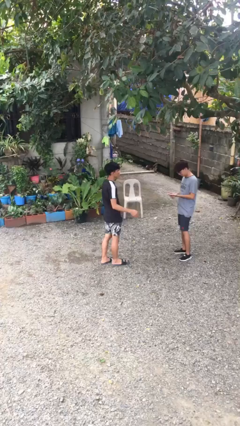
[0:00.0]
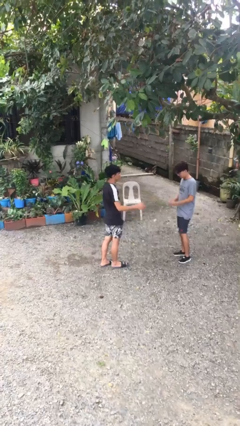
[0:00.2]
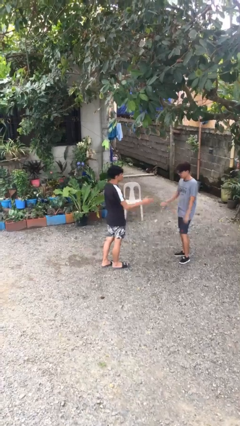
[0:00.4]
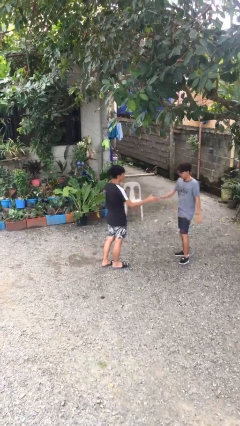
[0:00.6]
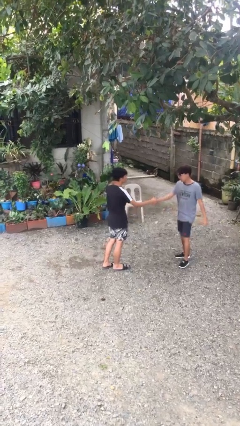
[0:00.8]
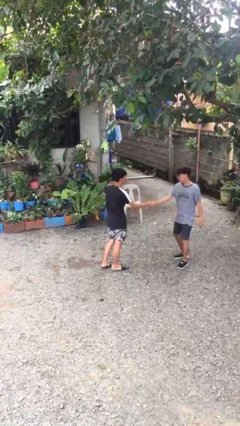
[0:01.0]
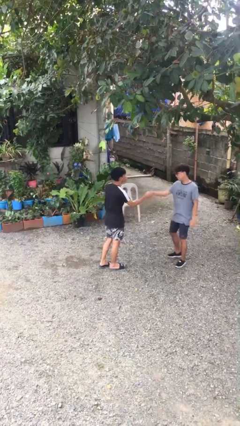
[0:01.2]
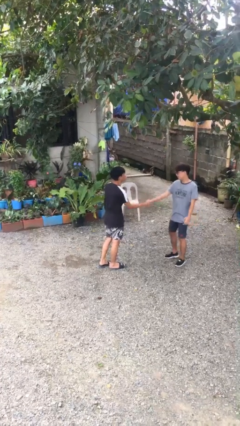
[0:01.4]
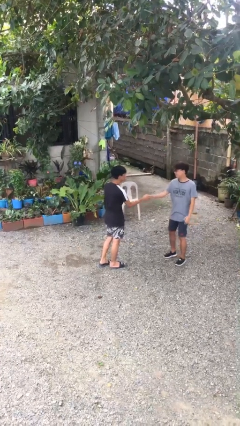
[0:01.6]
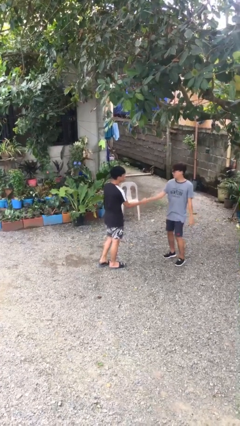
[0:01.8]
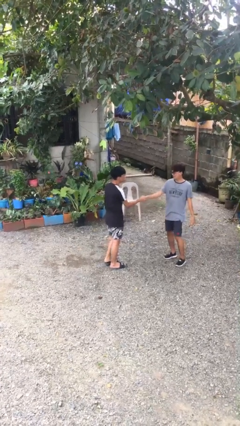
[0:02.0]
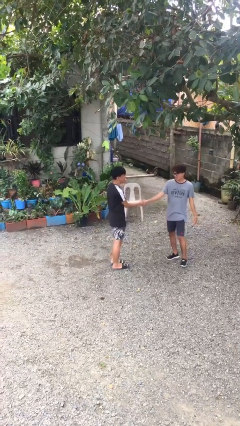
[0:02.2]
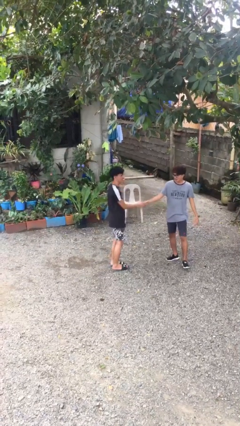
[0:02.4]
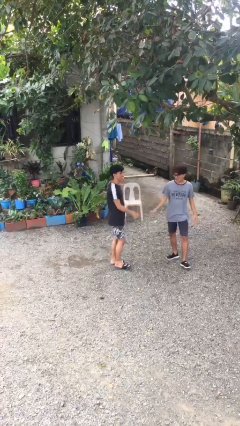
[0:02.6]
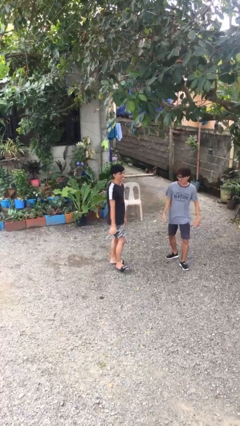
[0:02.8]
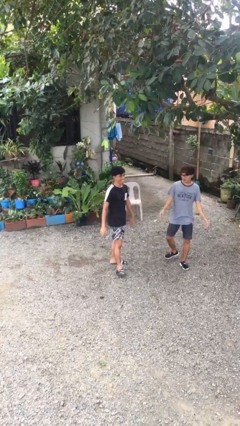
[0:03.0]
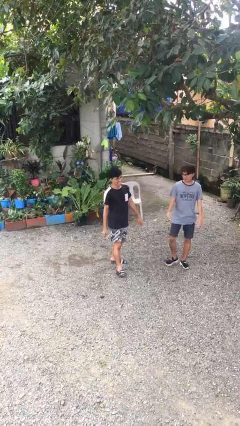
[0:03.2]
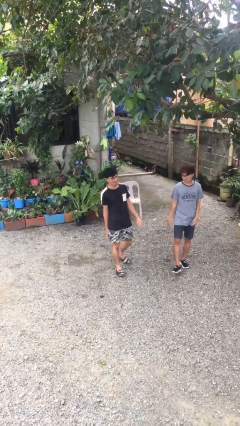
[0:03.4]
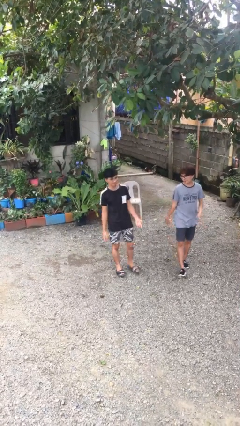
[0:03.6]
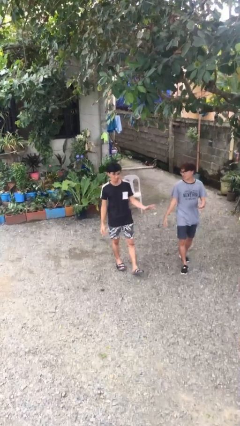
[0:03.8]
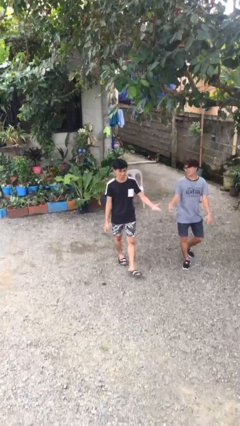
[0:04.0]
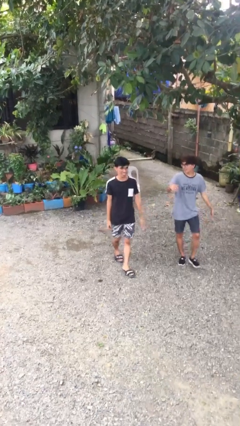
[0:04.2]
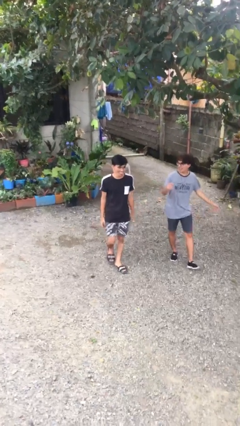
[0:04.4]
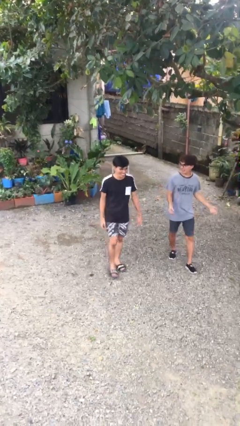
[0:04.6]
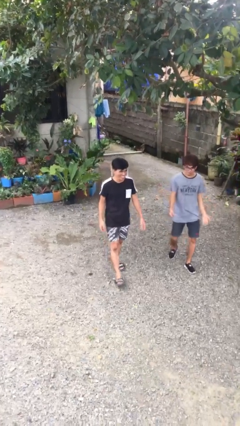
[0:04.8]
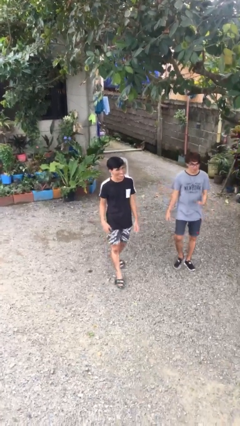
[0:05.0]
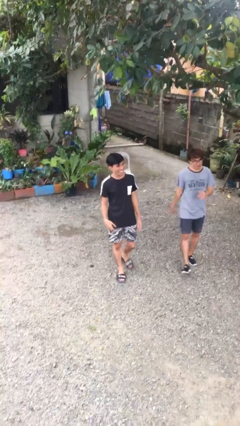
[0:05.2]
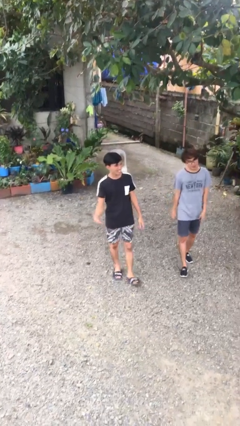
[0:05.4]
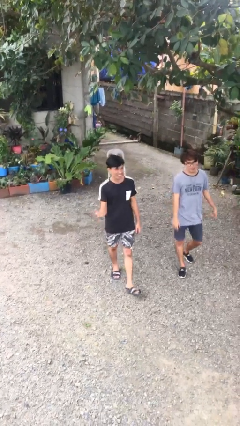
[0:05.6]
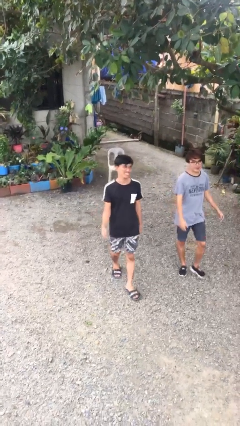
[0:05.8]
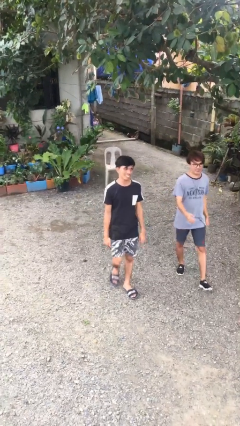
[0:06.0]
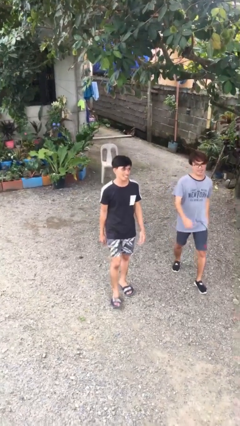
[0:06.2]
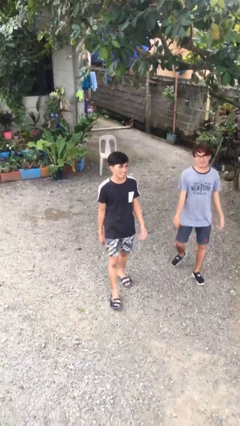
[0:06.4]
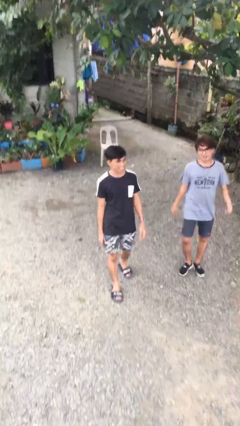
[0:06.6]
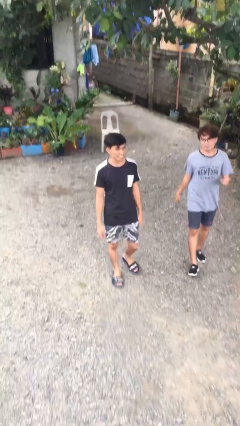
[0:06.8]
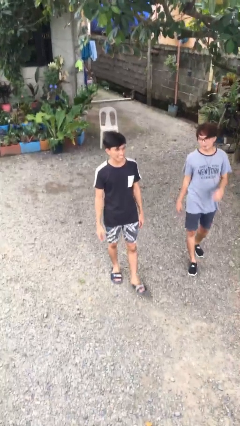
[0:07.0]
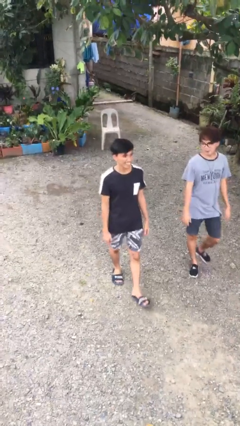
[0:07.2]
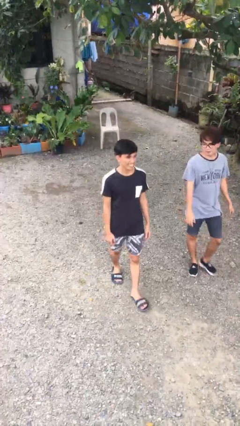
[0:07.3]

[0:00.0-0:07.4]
person shakes hand

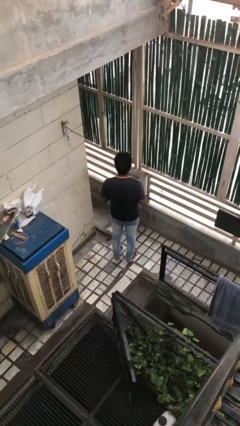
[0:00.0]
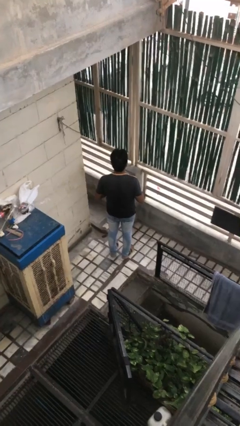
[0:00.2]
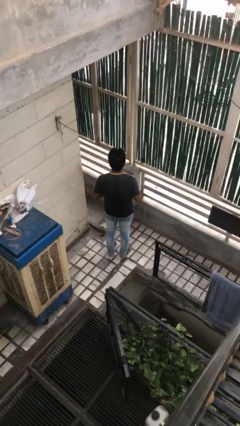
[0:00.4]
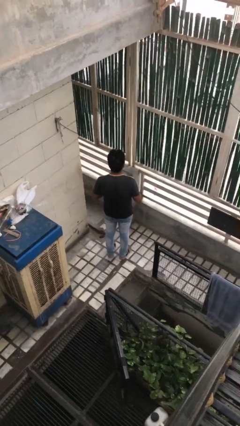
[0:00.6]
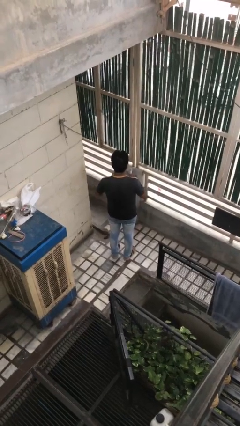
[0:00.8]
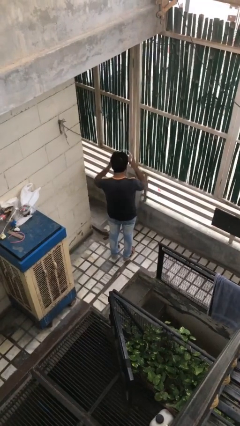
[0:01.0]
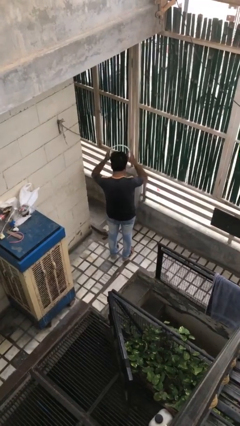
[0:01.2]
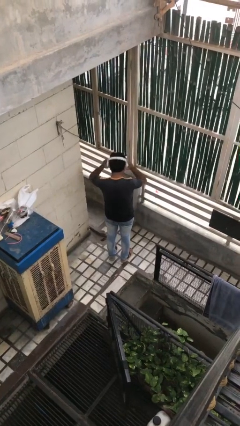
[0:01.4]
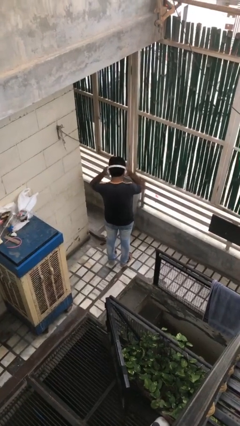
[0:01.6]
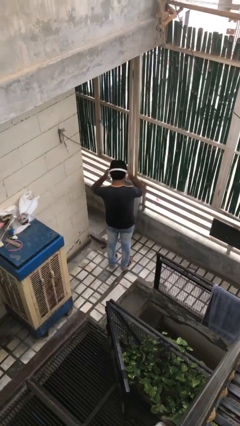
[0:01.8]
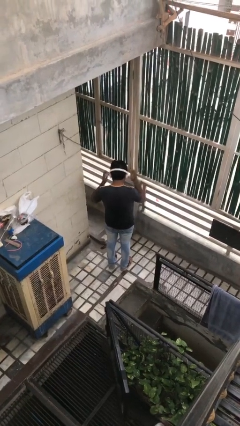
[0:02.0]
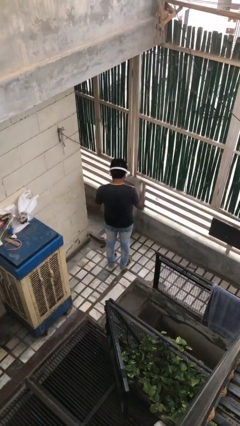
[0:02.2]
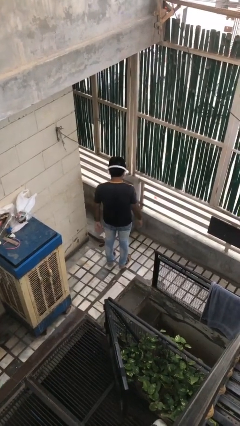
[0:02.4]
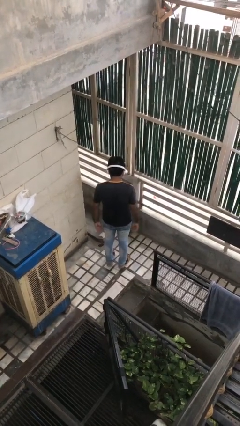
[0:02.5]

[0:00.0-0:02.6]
person puts on headphones

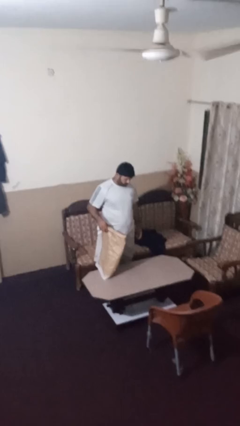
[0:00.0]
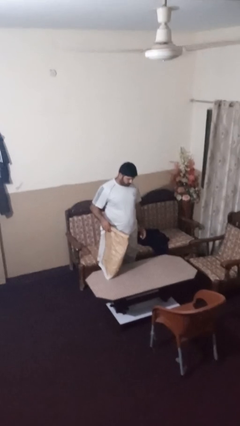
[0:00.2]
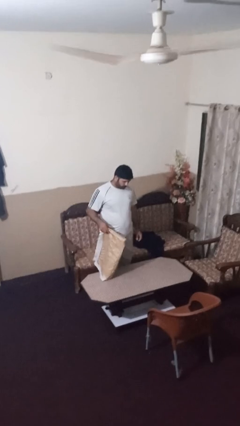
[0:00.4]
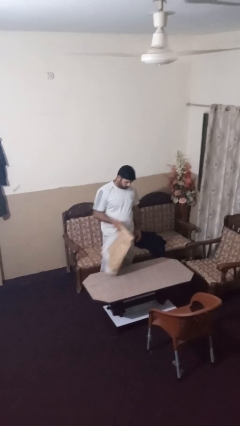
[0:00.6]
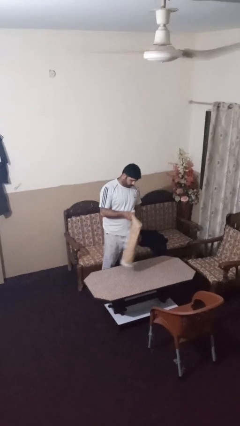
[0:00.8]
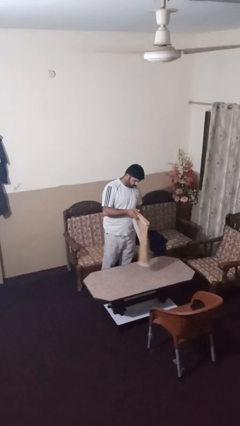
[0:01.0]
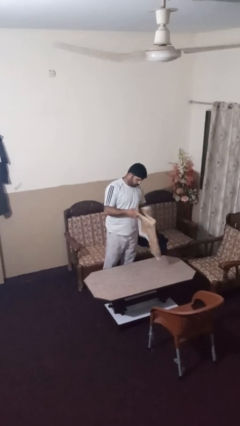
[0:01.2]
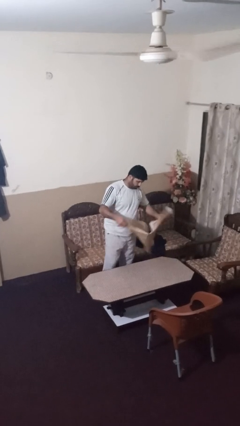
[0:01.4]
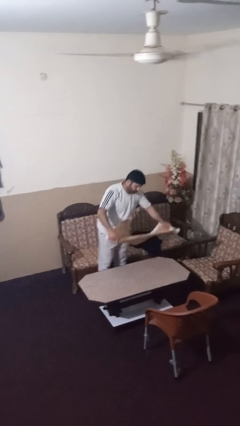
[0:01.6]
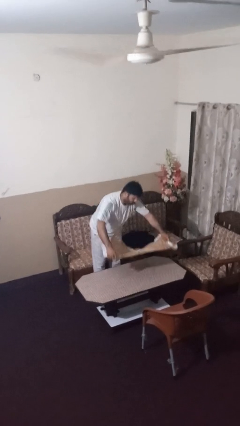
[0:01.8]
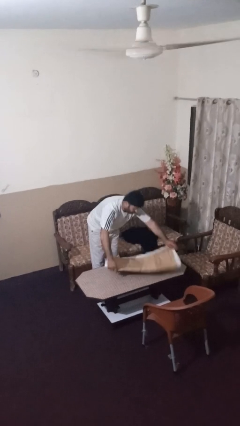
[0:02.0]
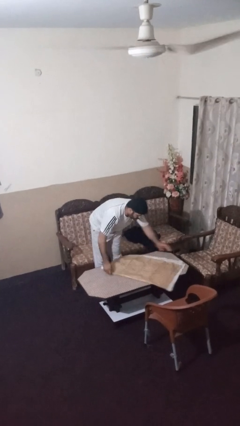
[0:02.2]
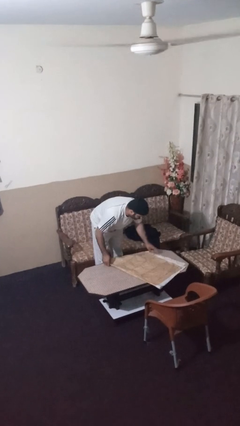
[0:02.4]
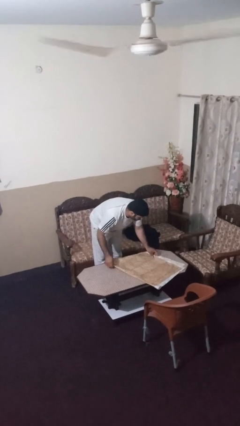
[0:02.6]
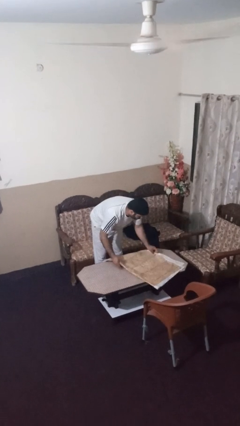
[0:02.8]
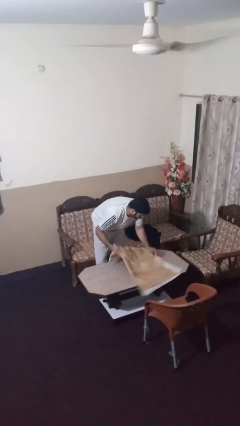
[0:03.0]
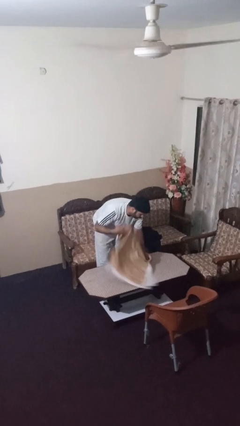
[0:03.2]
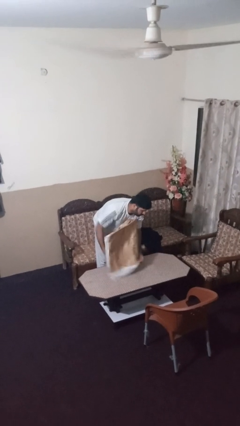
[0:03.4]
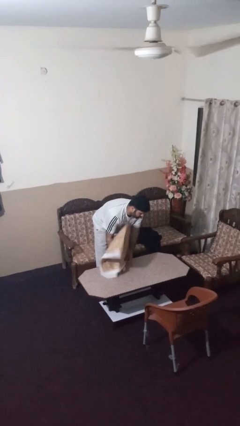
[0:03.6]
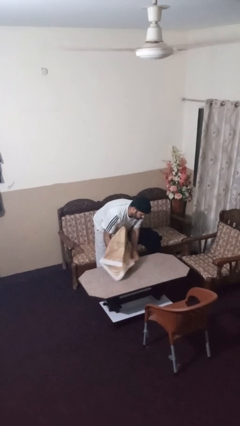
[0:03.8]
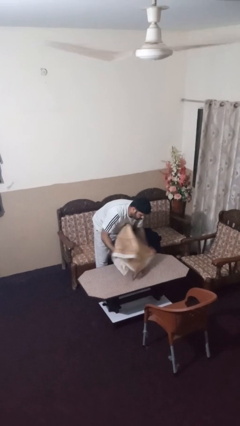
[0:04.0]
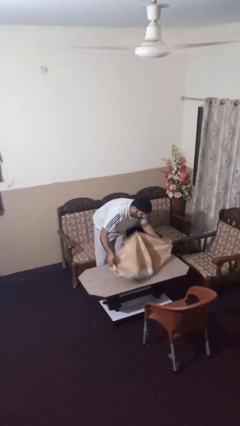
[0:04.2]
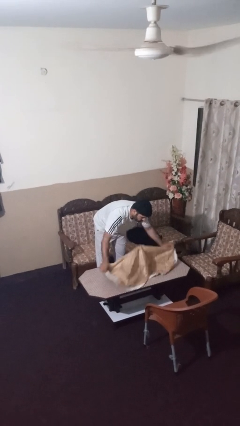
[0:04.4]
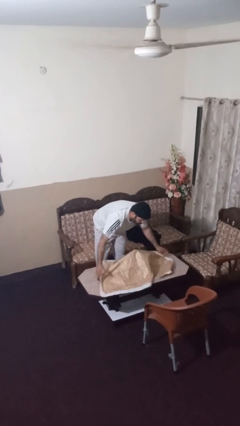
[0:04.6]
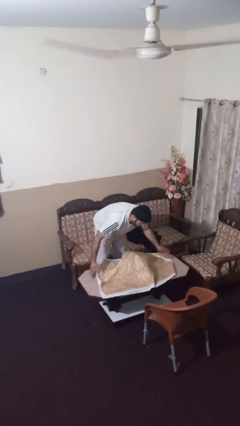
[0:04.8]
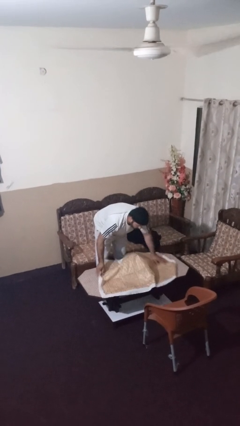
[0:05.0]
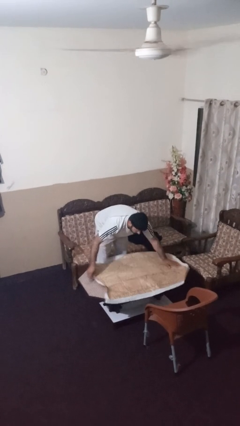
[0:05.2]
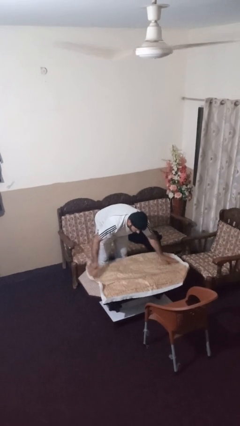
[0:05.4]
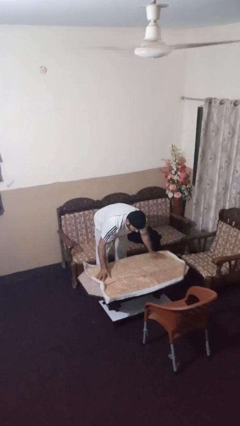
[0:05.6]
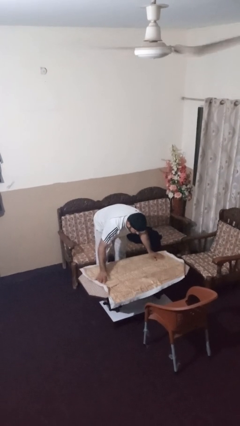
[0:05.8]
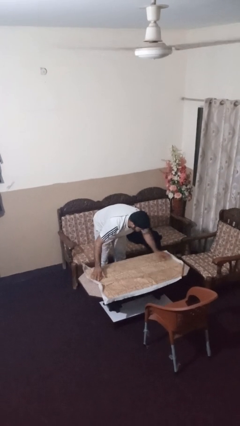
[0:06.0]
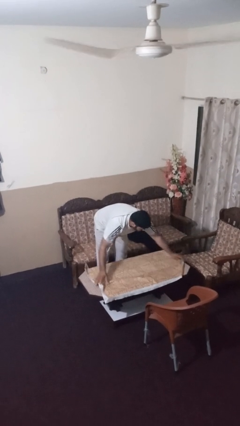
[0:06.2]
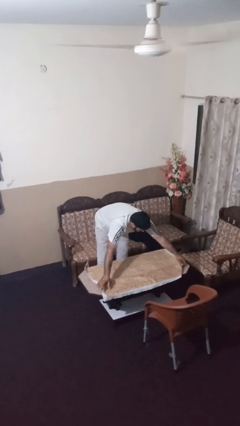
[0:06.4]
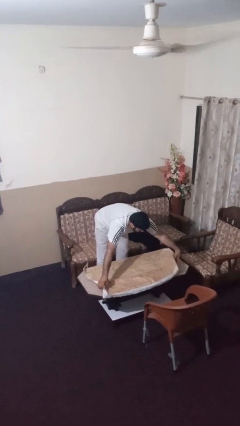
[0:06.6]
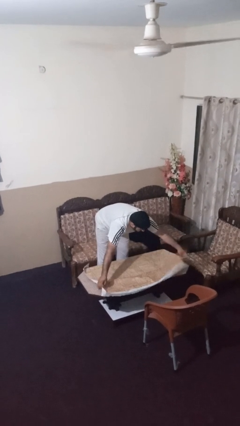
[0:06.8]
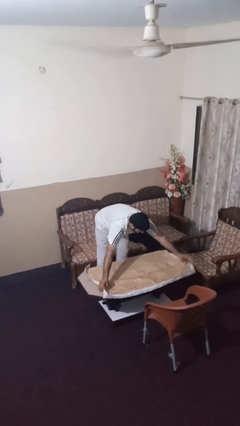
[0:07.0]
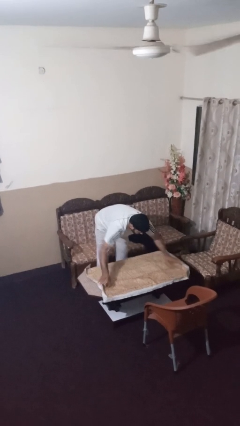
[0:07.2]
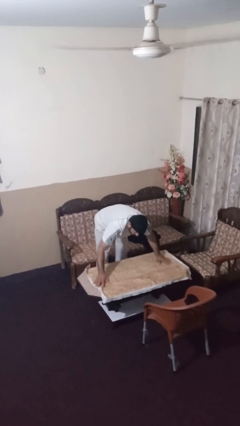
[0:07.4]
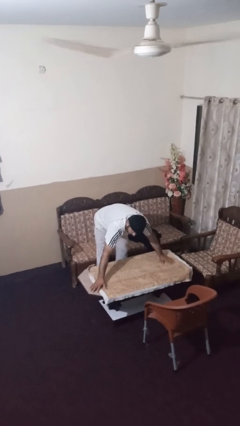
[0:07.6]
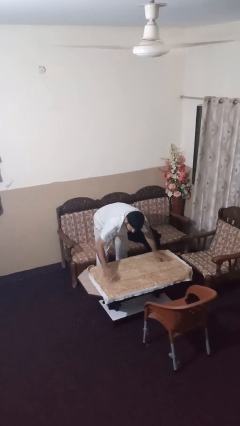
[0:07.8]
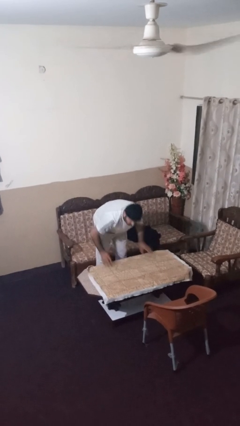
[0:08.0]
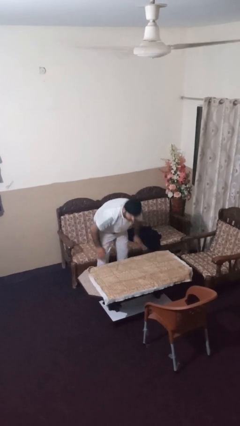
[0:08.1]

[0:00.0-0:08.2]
person spreads tablecloth
